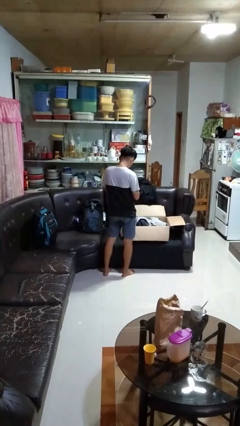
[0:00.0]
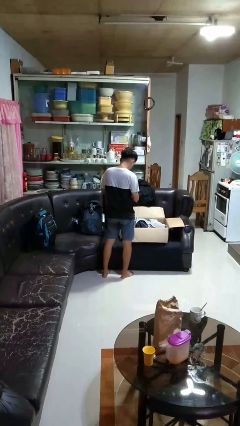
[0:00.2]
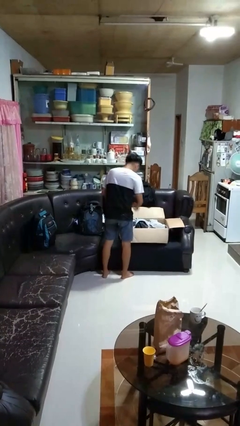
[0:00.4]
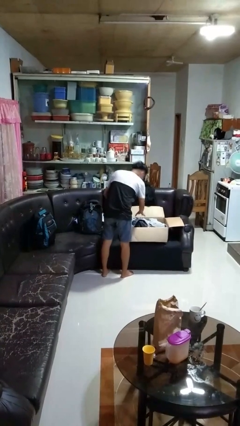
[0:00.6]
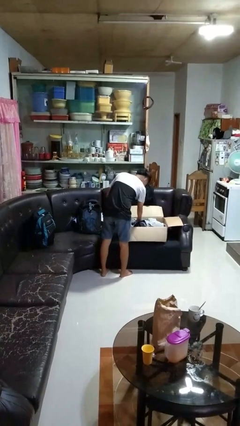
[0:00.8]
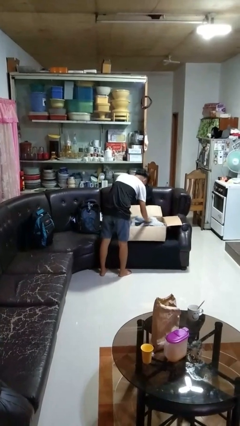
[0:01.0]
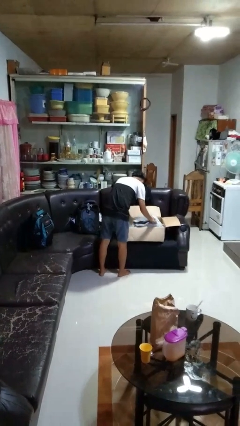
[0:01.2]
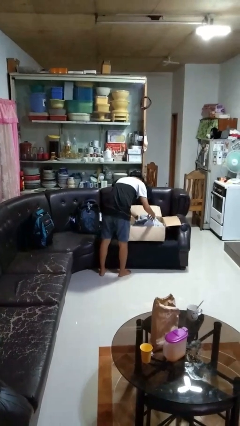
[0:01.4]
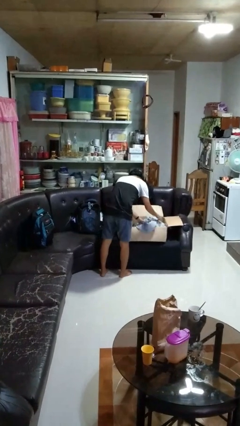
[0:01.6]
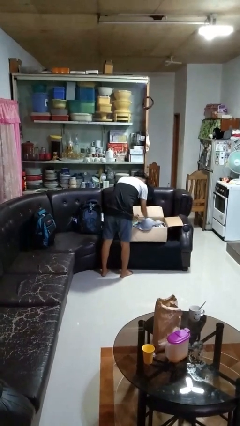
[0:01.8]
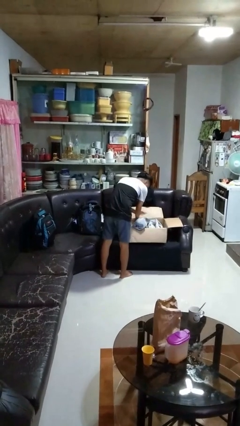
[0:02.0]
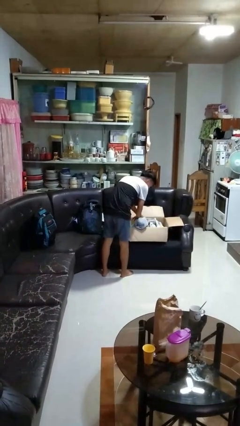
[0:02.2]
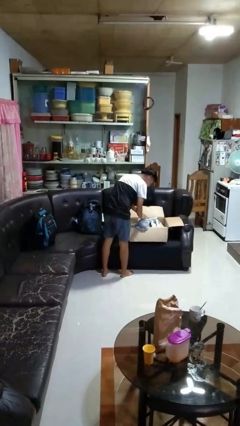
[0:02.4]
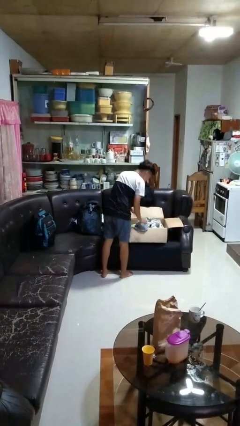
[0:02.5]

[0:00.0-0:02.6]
person searches in box

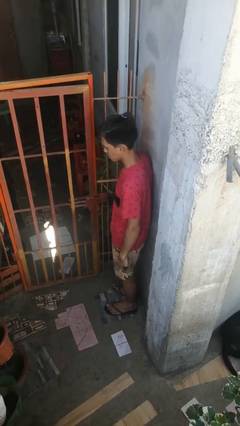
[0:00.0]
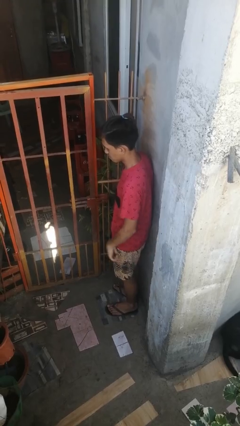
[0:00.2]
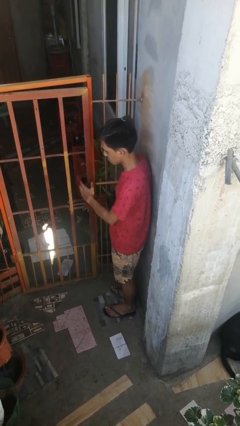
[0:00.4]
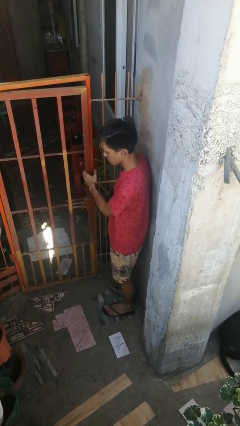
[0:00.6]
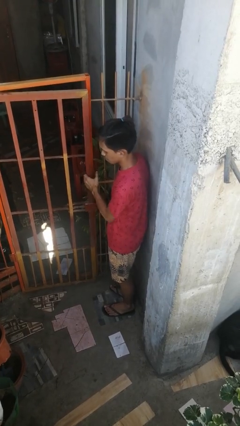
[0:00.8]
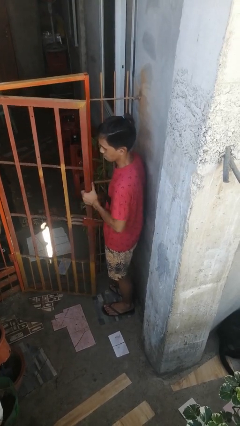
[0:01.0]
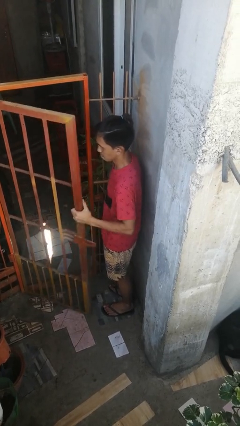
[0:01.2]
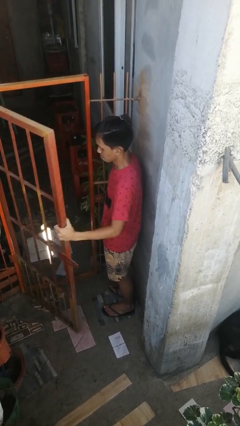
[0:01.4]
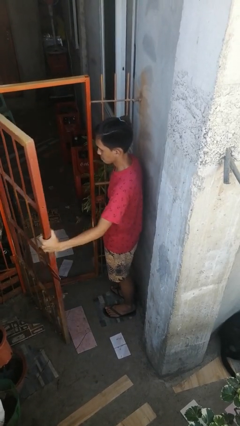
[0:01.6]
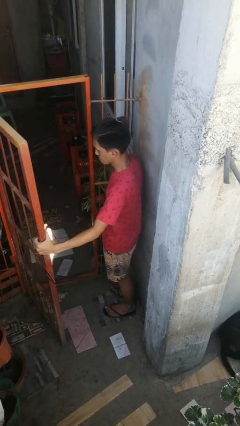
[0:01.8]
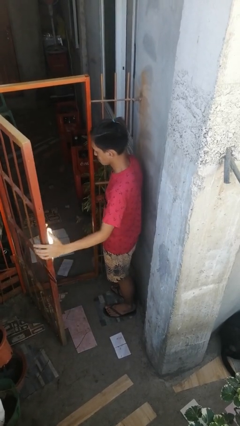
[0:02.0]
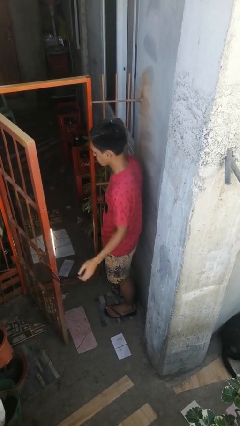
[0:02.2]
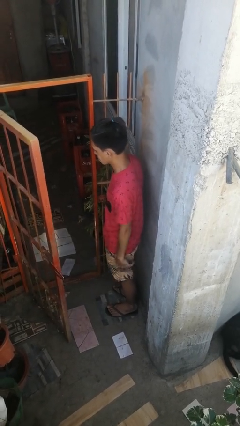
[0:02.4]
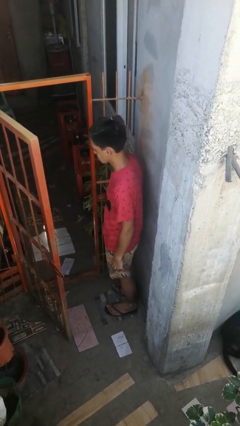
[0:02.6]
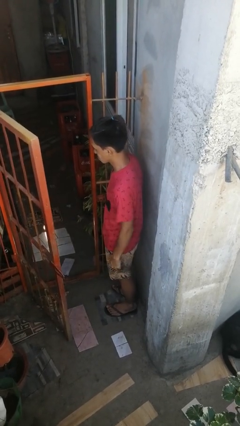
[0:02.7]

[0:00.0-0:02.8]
person opens gate

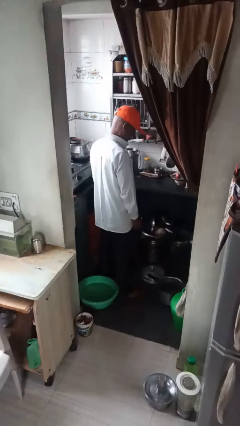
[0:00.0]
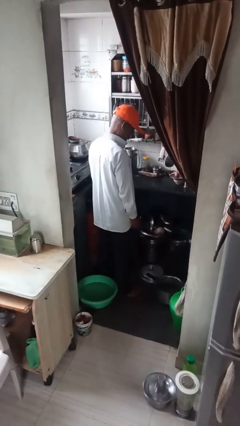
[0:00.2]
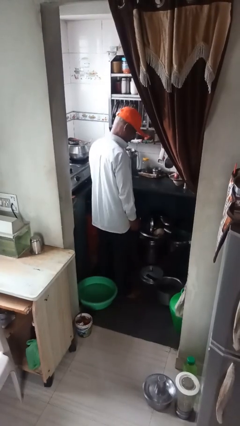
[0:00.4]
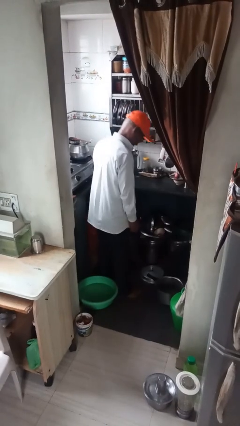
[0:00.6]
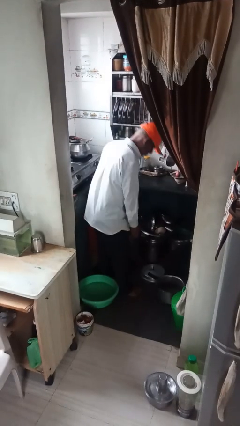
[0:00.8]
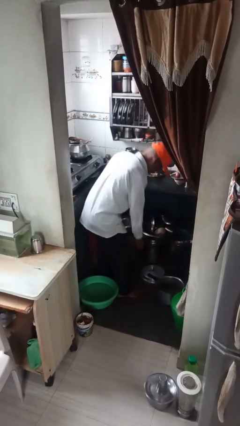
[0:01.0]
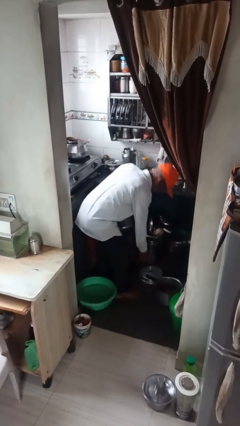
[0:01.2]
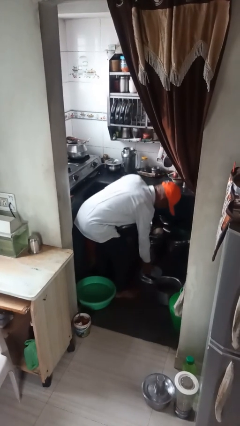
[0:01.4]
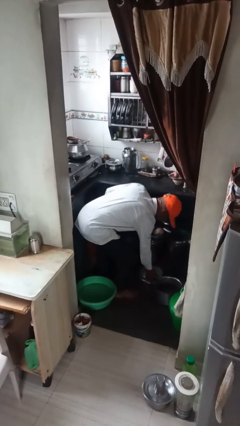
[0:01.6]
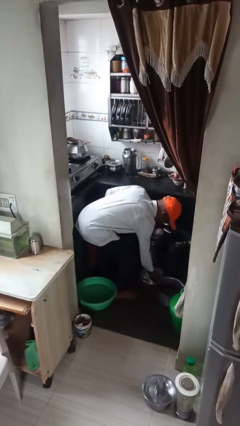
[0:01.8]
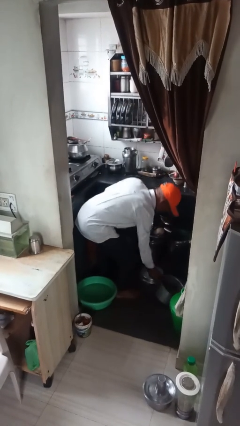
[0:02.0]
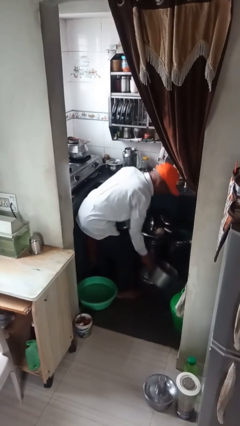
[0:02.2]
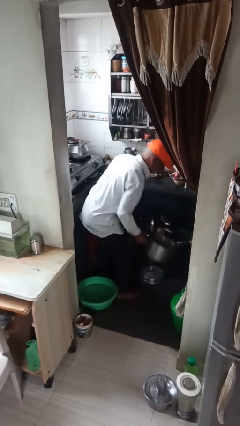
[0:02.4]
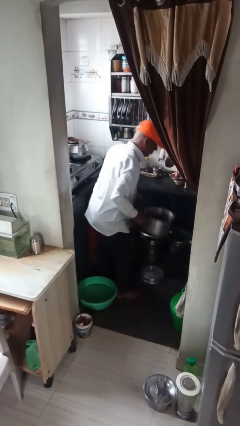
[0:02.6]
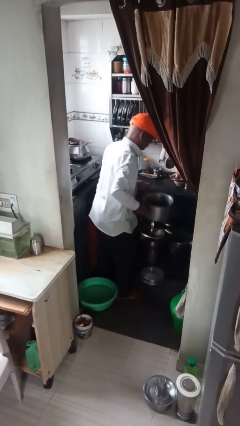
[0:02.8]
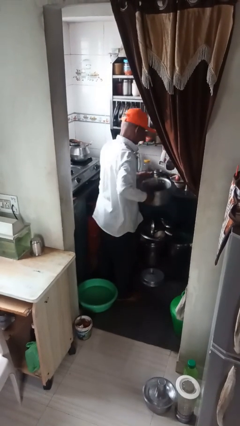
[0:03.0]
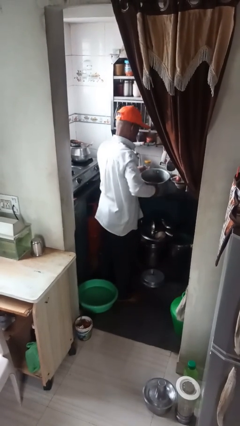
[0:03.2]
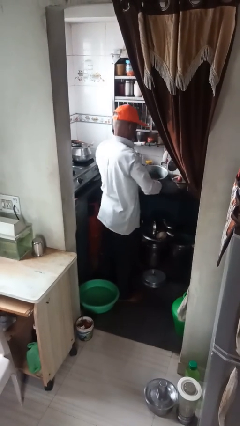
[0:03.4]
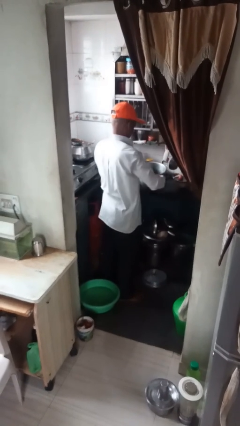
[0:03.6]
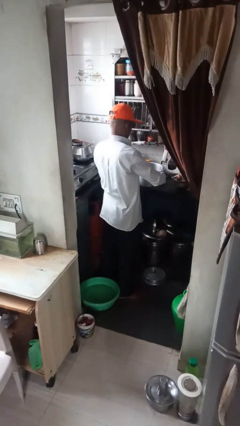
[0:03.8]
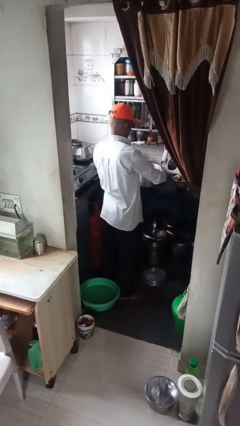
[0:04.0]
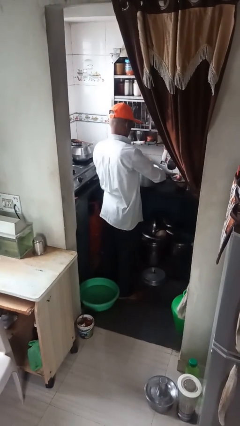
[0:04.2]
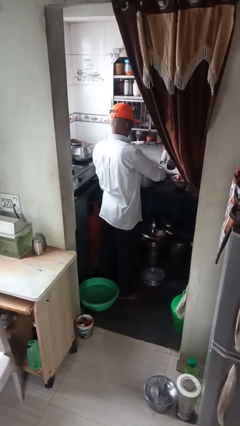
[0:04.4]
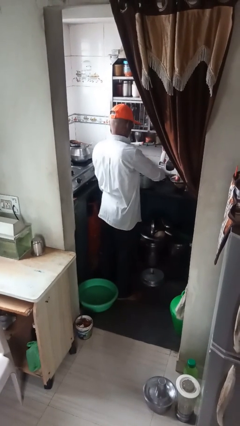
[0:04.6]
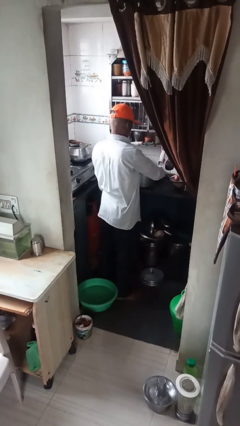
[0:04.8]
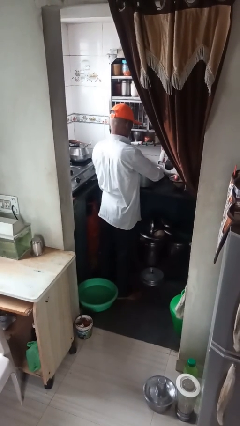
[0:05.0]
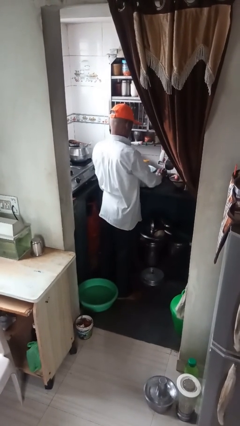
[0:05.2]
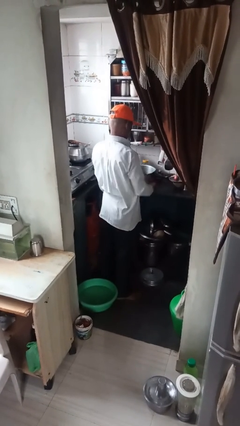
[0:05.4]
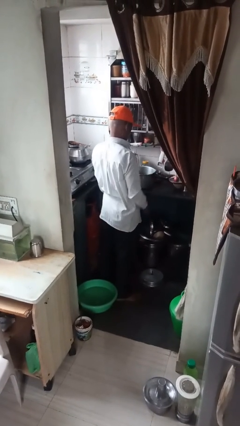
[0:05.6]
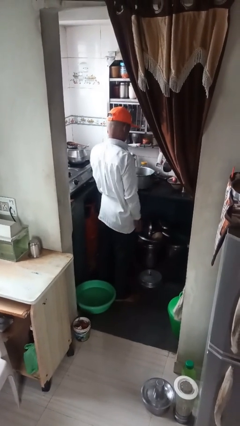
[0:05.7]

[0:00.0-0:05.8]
person picks up object from countertop

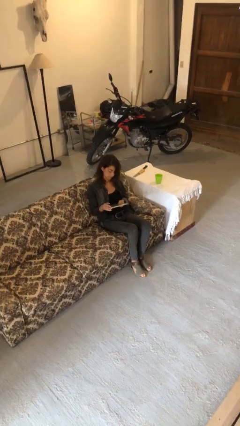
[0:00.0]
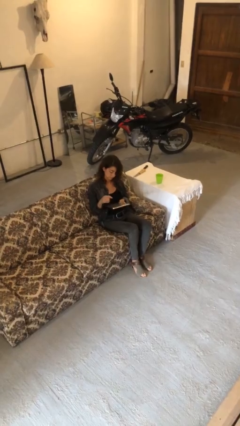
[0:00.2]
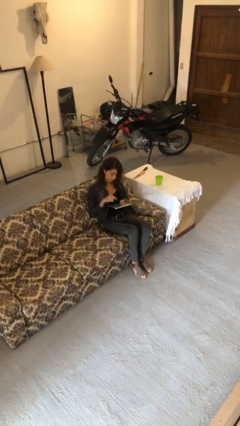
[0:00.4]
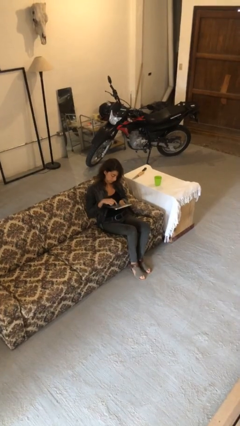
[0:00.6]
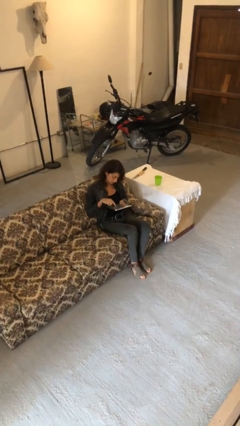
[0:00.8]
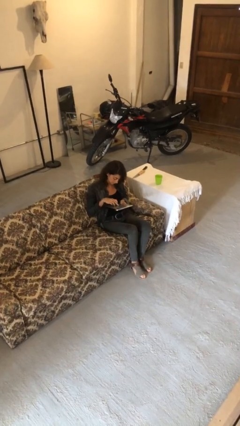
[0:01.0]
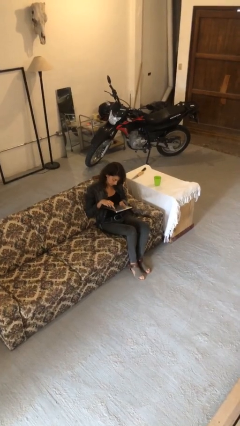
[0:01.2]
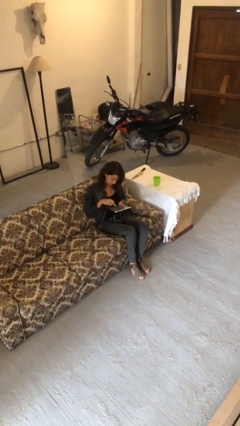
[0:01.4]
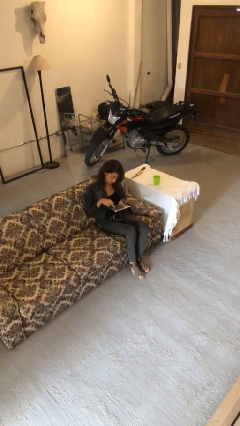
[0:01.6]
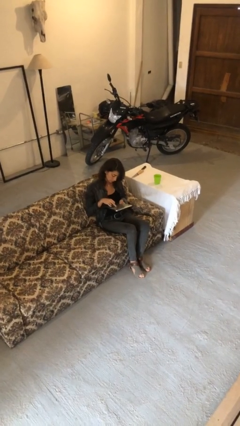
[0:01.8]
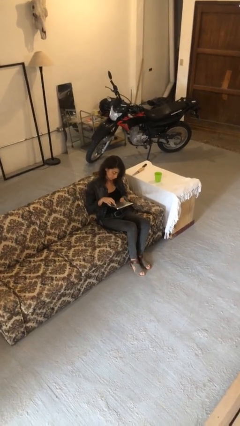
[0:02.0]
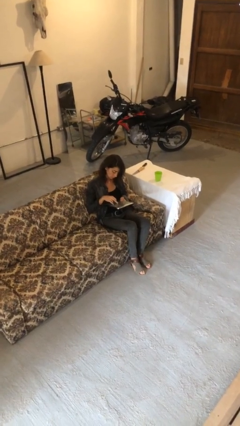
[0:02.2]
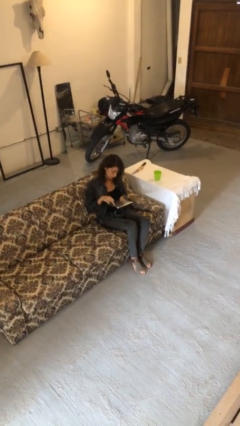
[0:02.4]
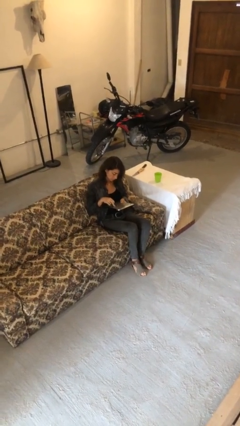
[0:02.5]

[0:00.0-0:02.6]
person interacts with tablet

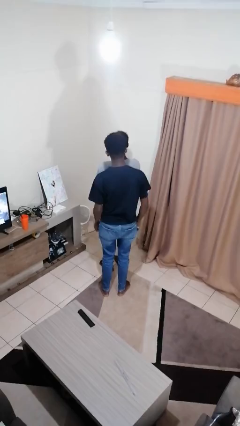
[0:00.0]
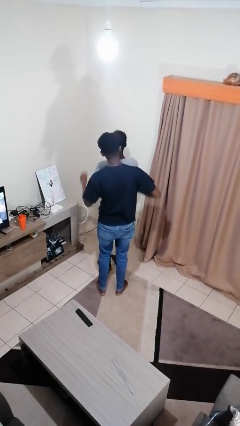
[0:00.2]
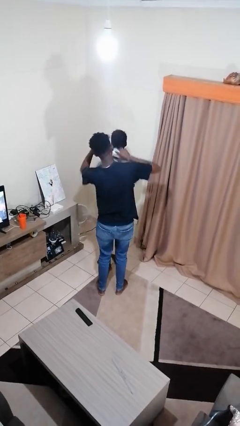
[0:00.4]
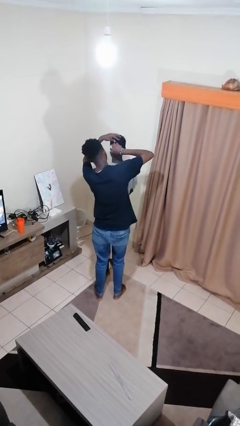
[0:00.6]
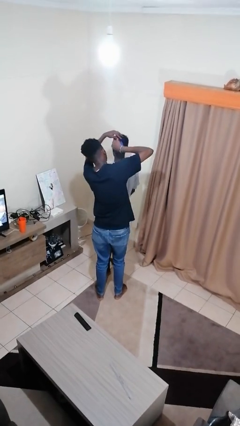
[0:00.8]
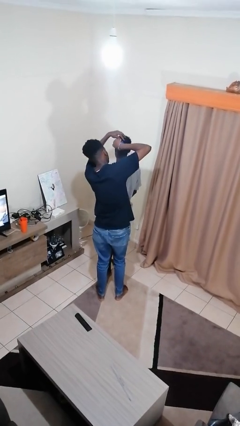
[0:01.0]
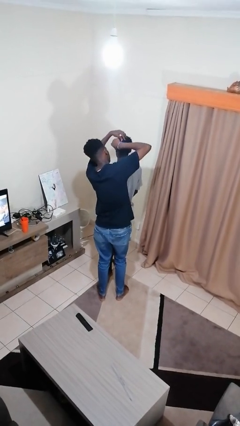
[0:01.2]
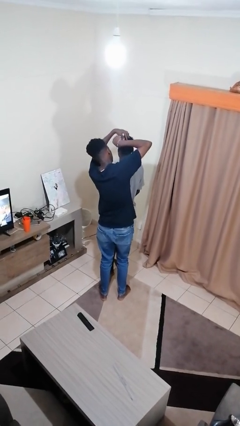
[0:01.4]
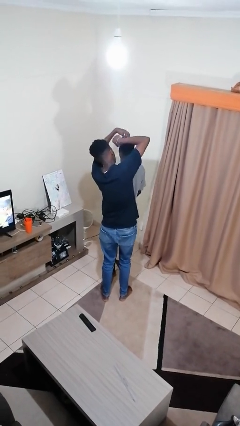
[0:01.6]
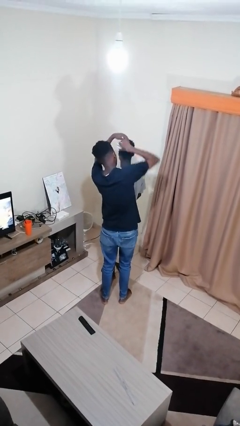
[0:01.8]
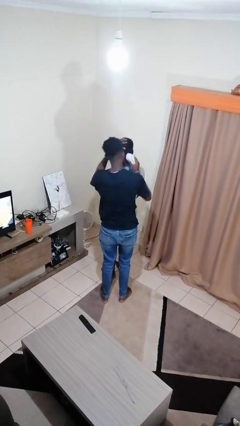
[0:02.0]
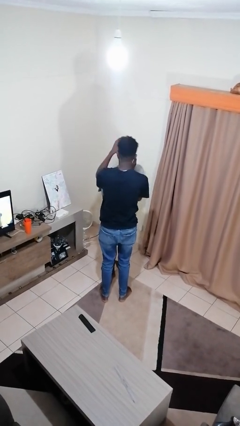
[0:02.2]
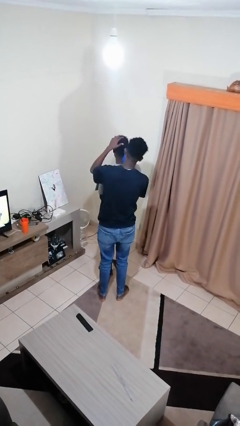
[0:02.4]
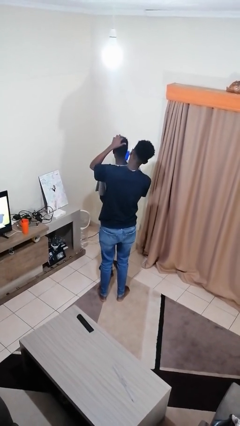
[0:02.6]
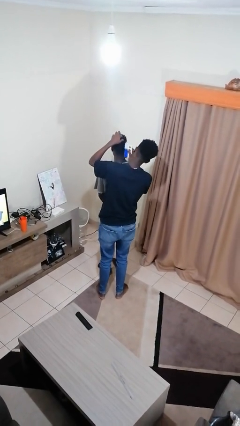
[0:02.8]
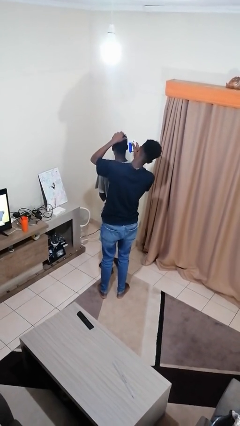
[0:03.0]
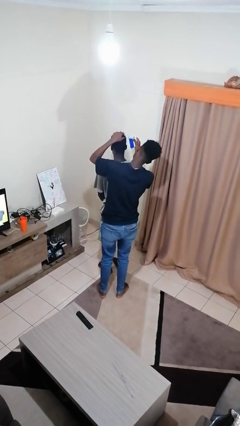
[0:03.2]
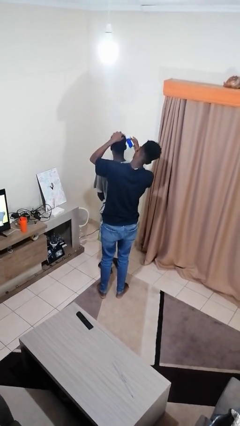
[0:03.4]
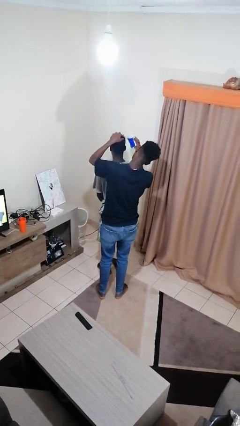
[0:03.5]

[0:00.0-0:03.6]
person brushes hair of person

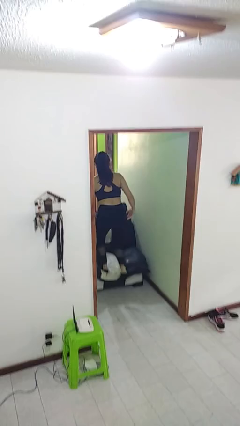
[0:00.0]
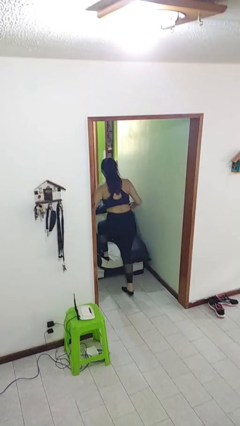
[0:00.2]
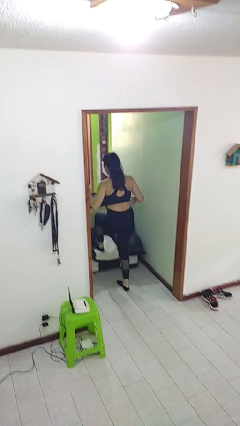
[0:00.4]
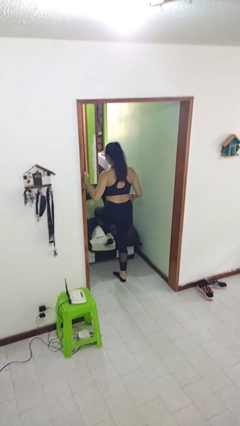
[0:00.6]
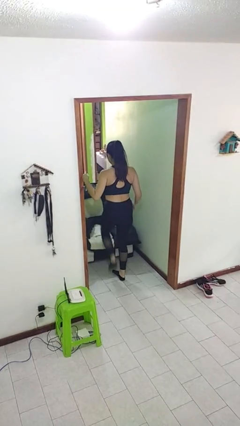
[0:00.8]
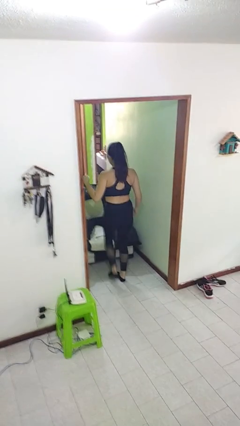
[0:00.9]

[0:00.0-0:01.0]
person climbs off couch
